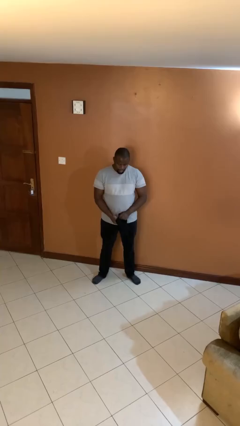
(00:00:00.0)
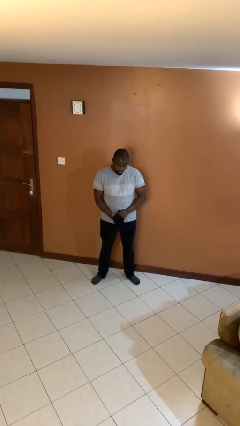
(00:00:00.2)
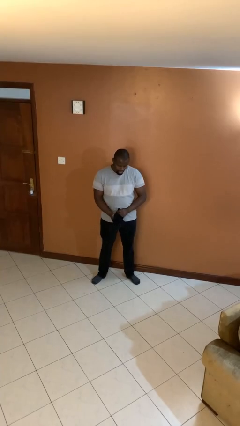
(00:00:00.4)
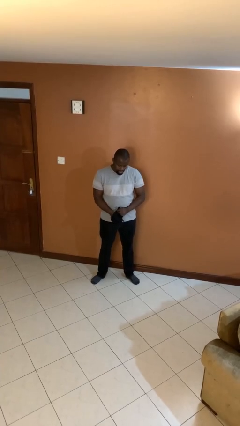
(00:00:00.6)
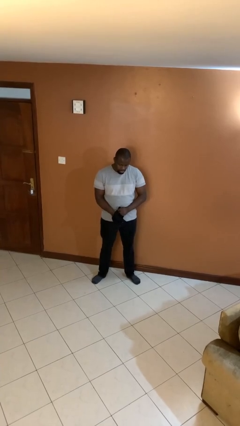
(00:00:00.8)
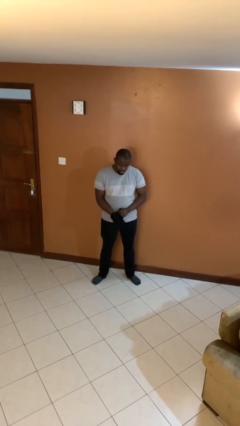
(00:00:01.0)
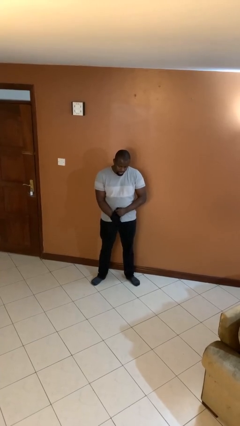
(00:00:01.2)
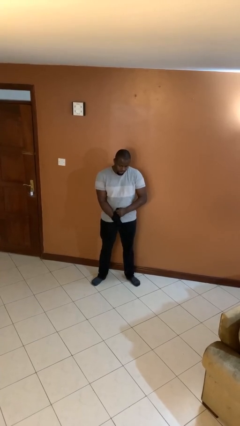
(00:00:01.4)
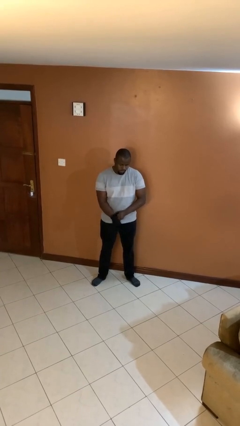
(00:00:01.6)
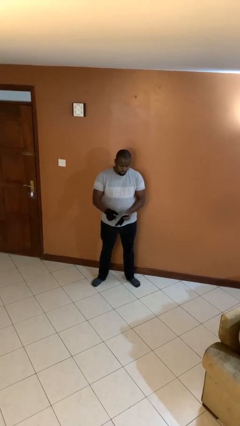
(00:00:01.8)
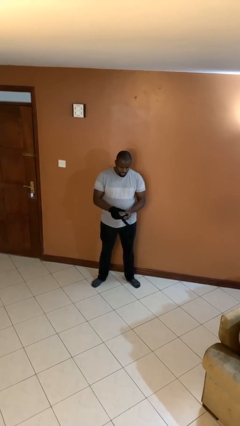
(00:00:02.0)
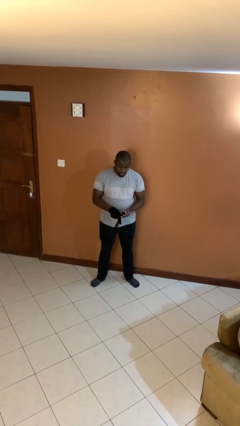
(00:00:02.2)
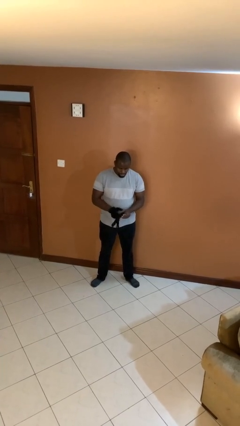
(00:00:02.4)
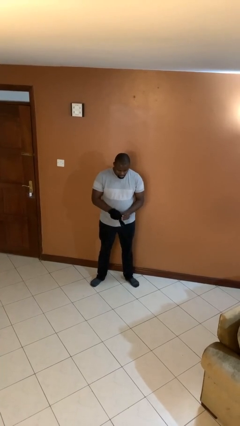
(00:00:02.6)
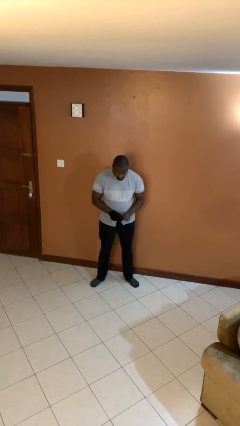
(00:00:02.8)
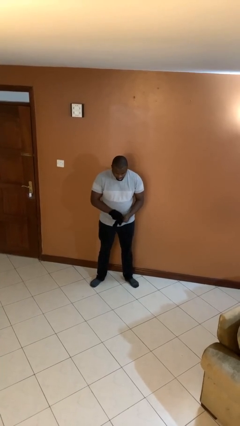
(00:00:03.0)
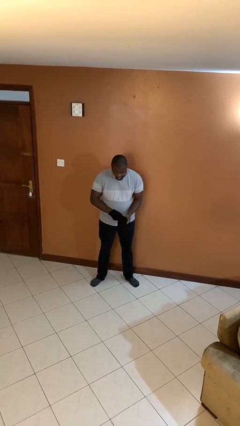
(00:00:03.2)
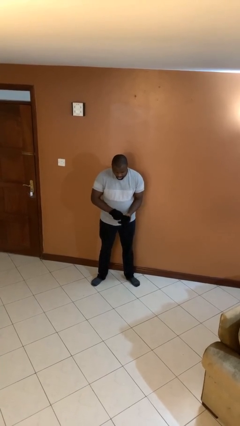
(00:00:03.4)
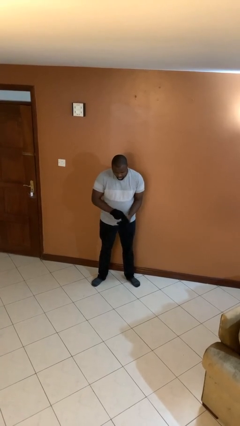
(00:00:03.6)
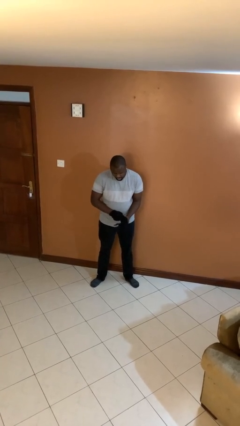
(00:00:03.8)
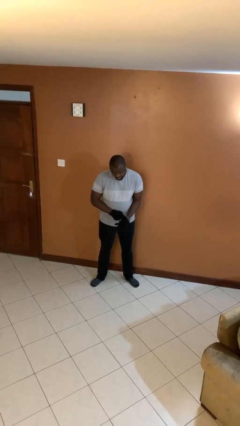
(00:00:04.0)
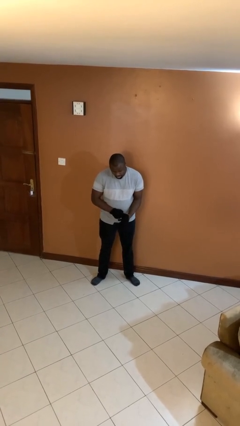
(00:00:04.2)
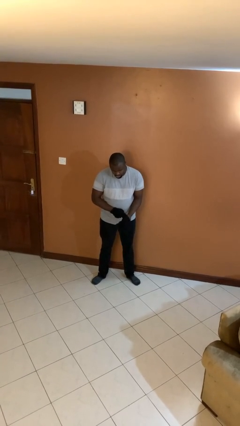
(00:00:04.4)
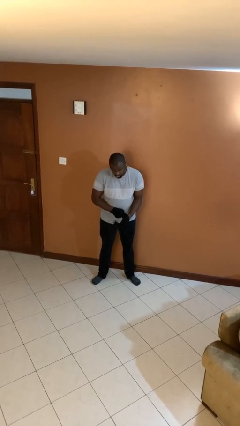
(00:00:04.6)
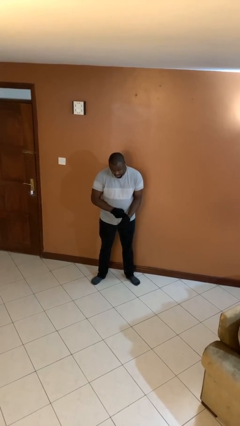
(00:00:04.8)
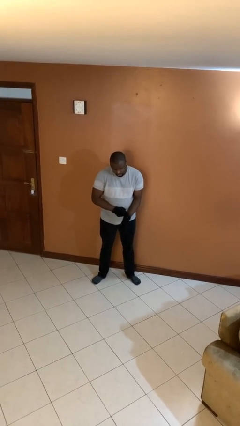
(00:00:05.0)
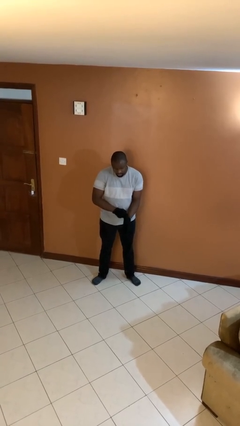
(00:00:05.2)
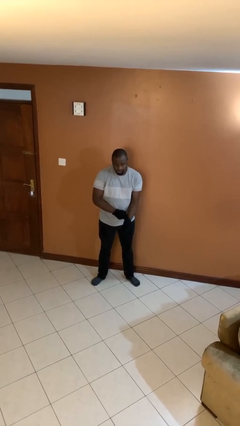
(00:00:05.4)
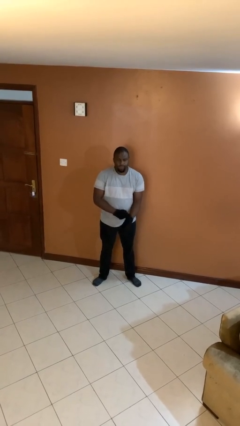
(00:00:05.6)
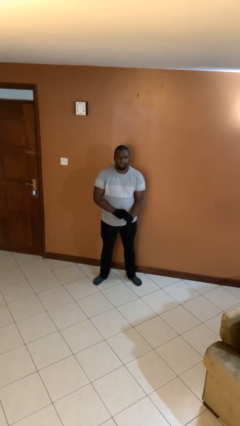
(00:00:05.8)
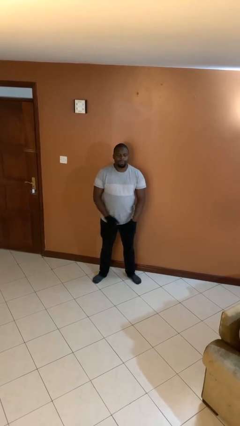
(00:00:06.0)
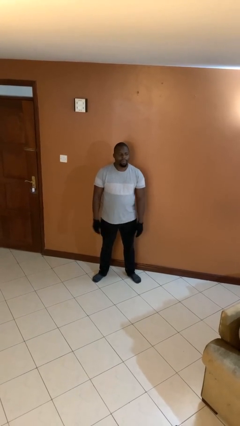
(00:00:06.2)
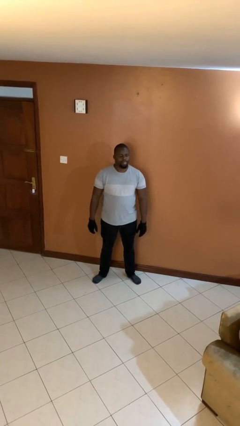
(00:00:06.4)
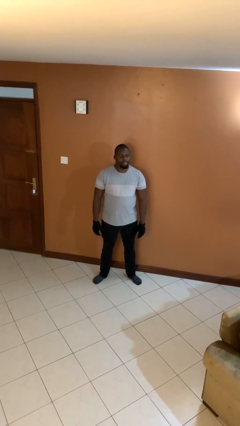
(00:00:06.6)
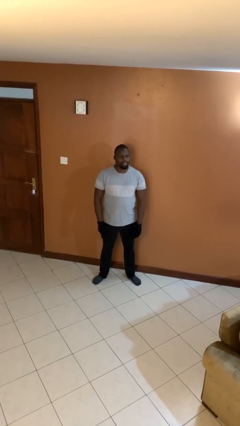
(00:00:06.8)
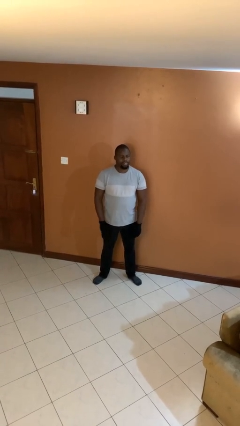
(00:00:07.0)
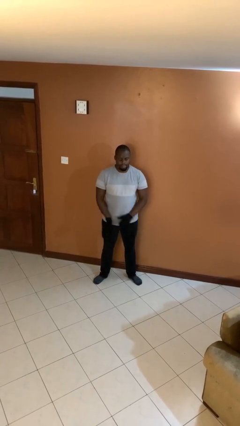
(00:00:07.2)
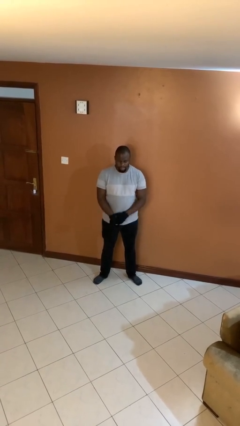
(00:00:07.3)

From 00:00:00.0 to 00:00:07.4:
person puts on gloves

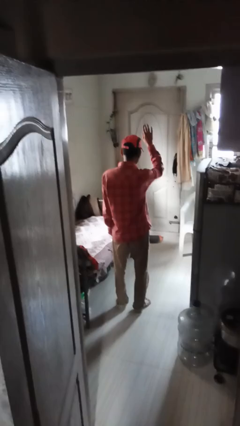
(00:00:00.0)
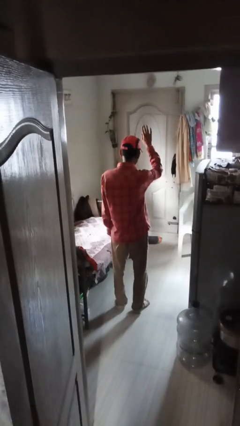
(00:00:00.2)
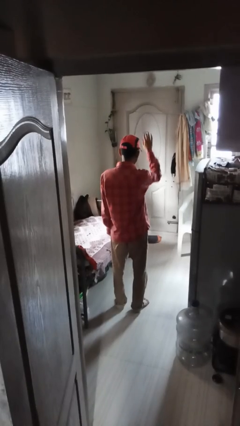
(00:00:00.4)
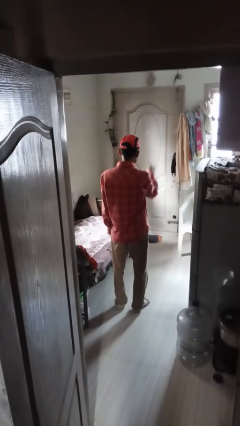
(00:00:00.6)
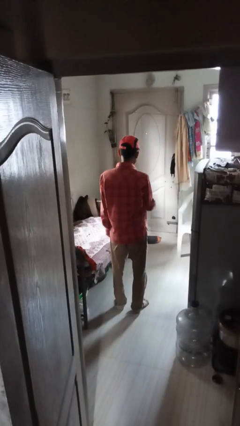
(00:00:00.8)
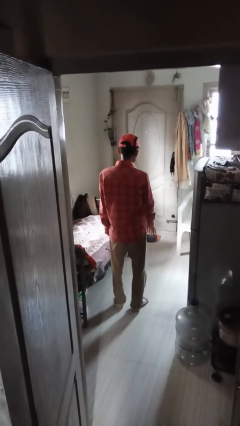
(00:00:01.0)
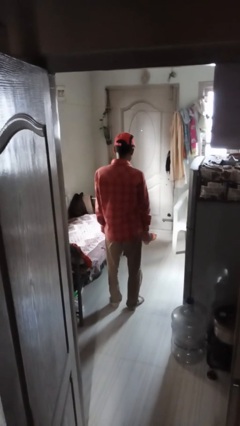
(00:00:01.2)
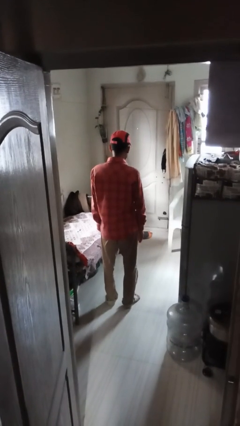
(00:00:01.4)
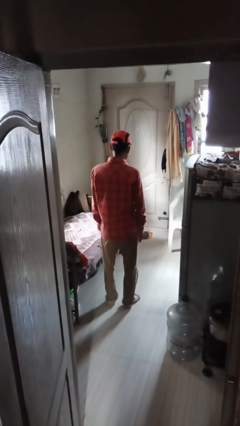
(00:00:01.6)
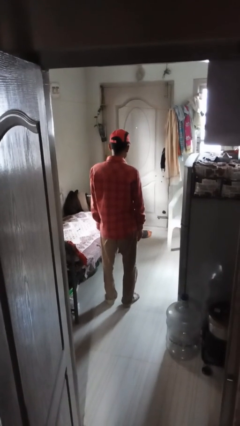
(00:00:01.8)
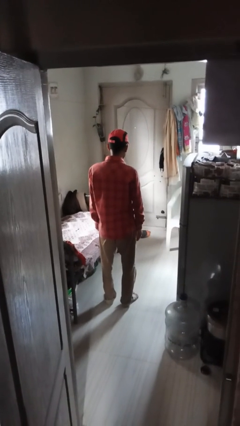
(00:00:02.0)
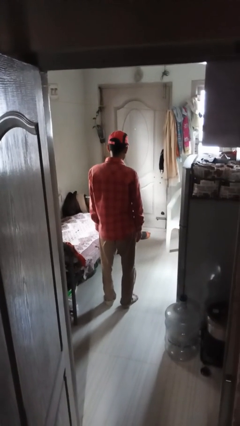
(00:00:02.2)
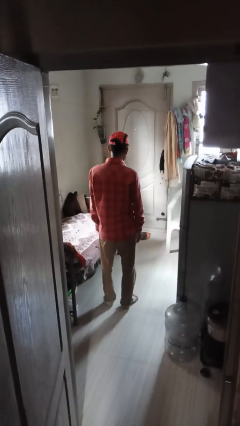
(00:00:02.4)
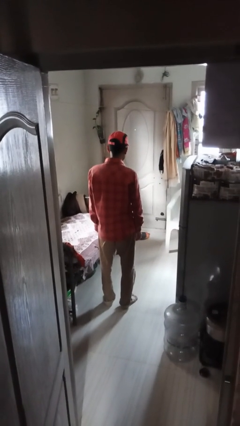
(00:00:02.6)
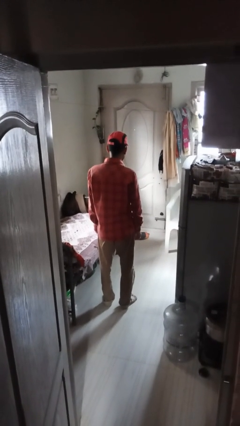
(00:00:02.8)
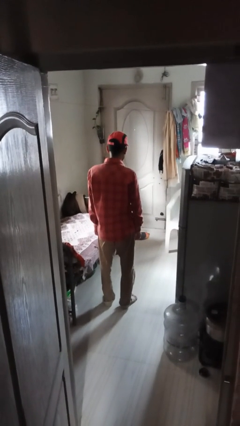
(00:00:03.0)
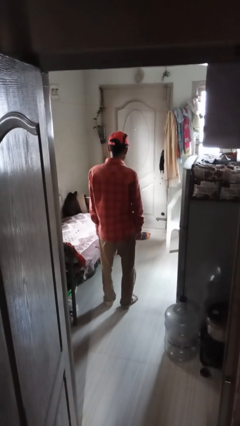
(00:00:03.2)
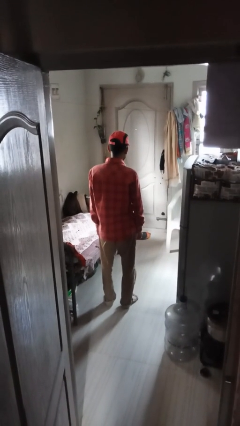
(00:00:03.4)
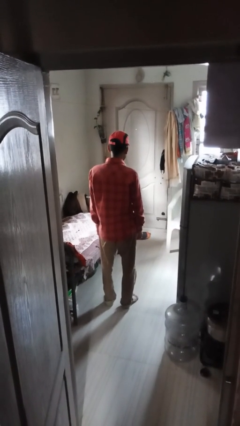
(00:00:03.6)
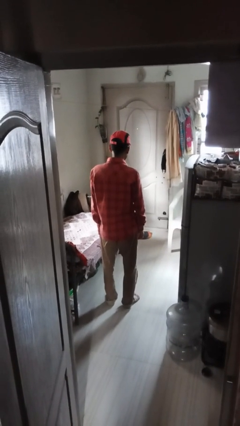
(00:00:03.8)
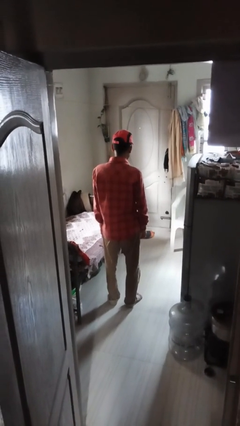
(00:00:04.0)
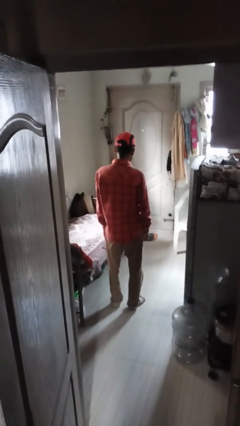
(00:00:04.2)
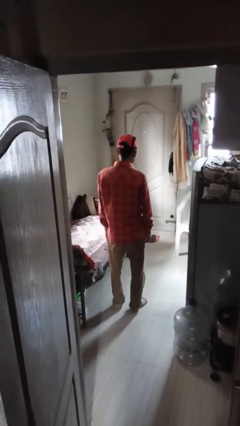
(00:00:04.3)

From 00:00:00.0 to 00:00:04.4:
person gestures lower hand

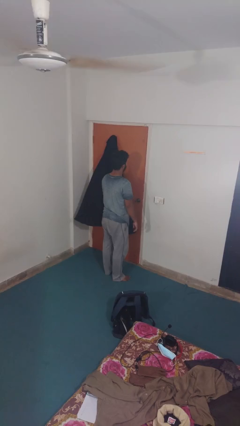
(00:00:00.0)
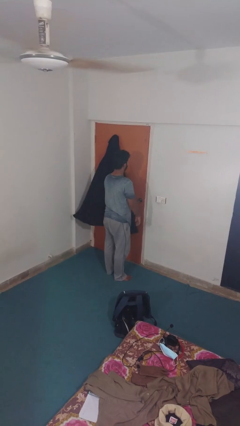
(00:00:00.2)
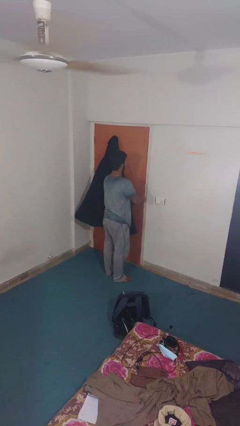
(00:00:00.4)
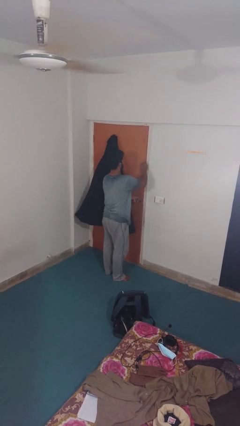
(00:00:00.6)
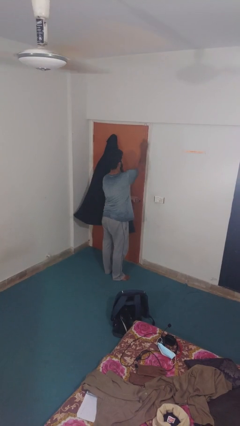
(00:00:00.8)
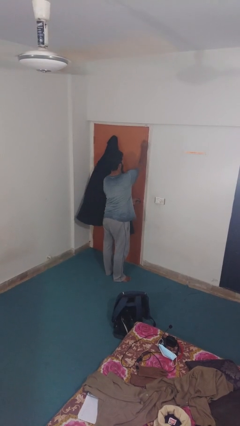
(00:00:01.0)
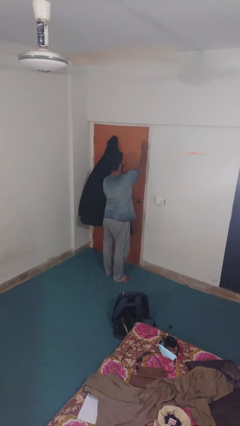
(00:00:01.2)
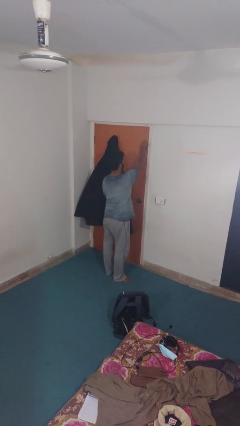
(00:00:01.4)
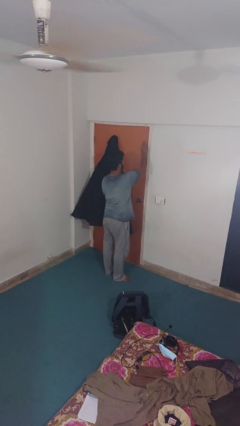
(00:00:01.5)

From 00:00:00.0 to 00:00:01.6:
person unlocks door with keys

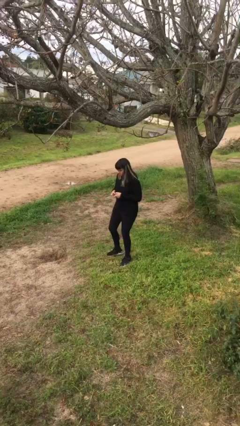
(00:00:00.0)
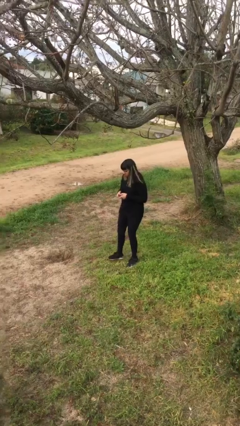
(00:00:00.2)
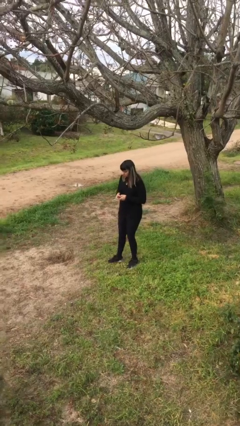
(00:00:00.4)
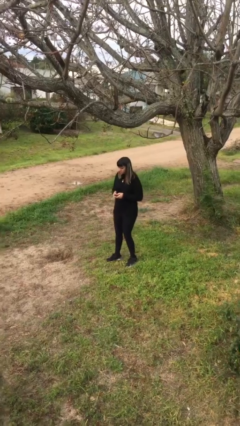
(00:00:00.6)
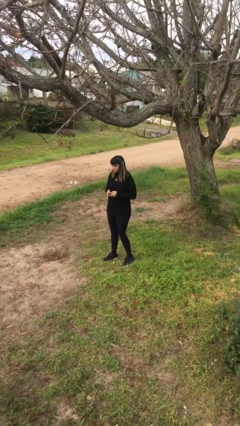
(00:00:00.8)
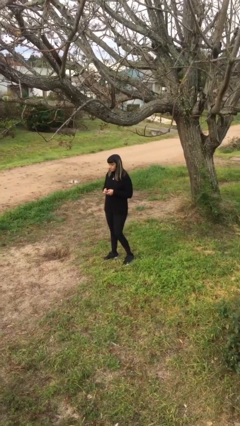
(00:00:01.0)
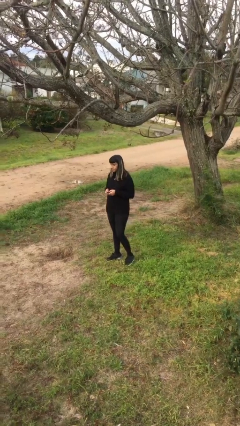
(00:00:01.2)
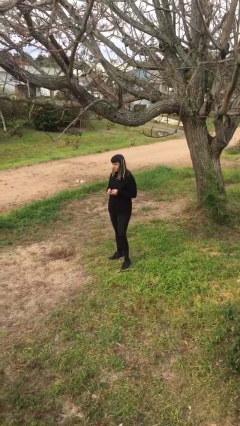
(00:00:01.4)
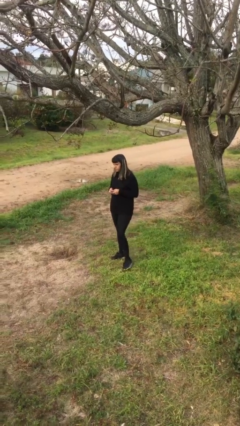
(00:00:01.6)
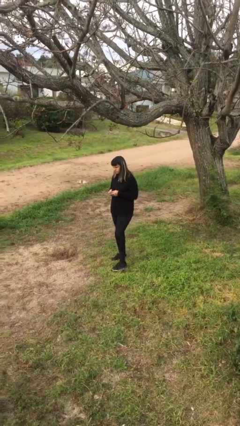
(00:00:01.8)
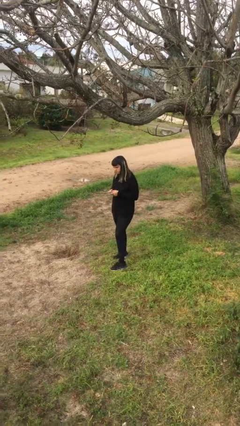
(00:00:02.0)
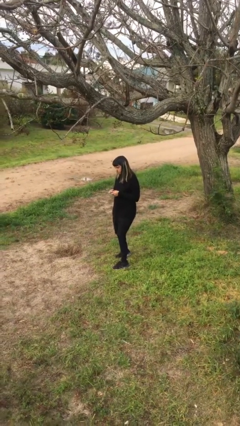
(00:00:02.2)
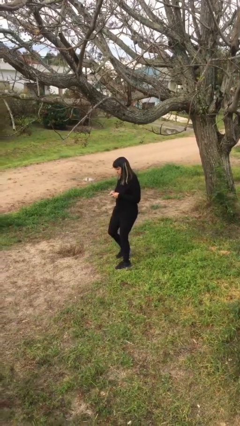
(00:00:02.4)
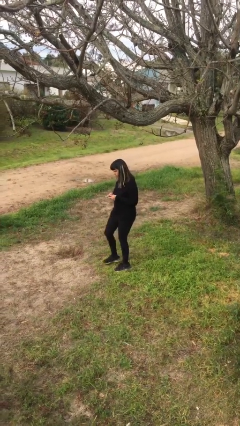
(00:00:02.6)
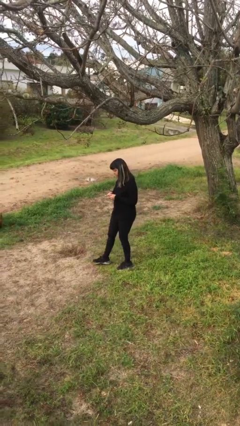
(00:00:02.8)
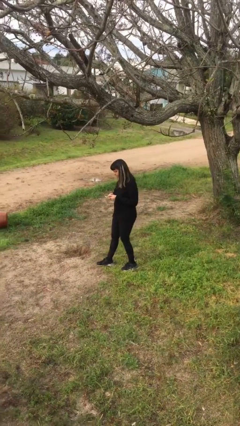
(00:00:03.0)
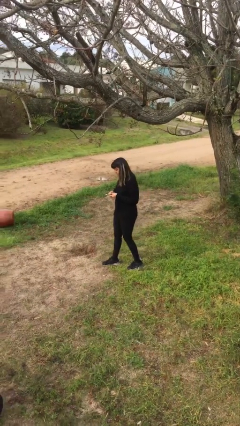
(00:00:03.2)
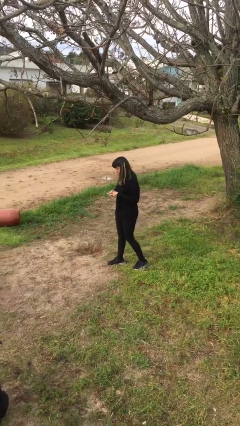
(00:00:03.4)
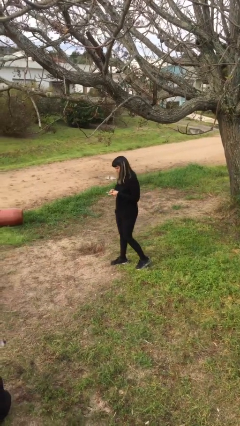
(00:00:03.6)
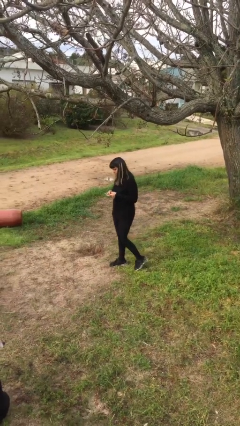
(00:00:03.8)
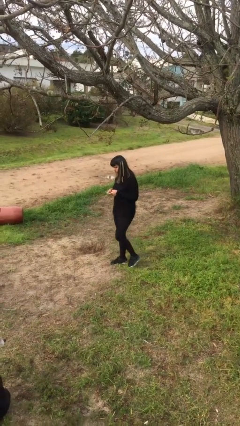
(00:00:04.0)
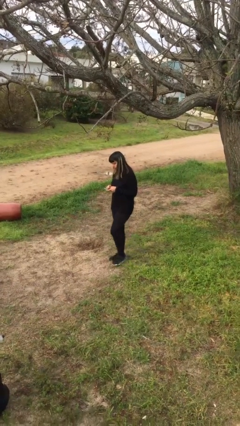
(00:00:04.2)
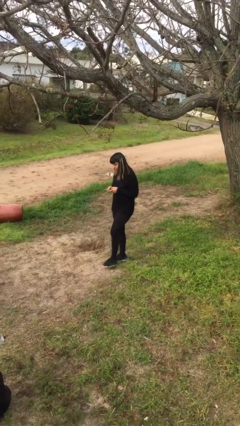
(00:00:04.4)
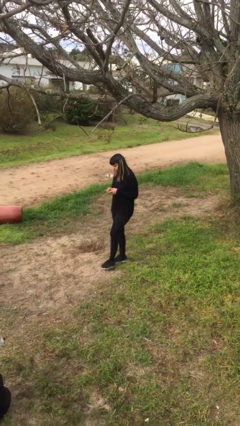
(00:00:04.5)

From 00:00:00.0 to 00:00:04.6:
person texts on phone
